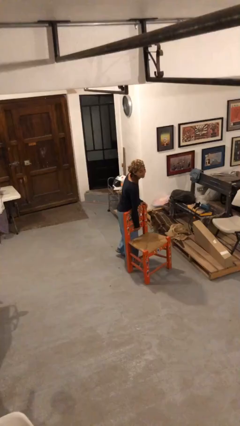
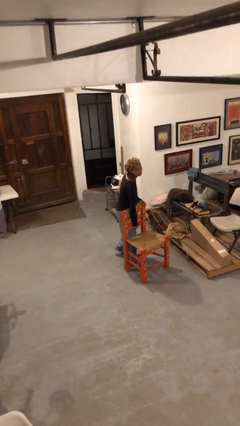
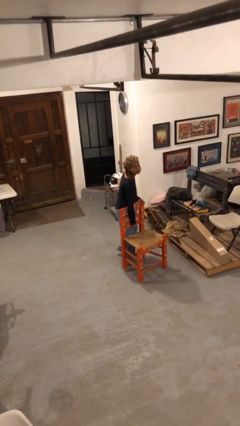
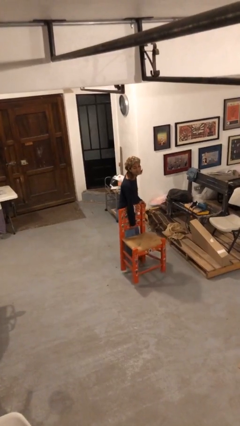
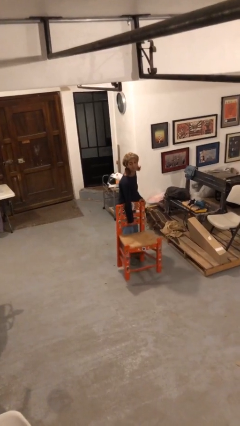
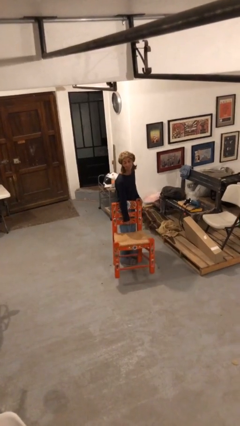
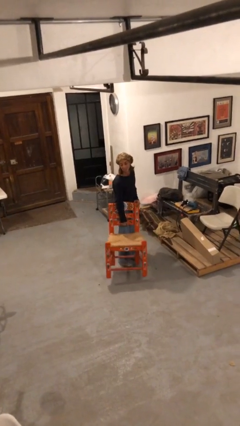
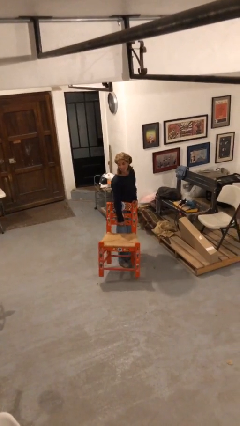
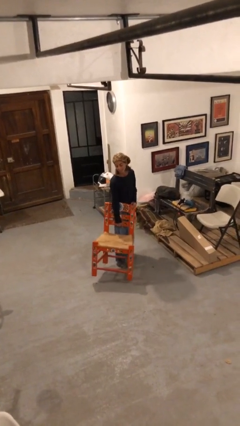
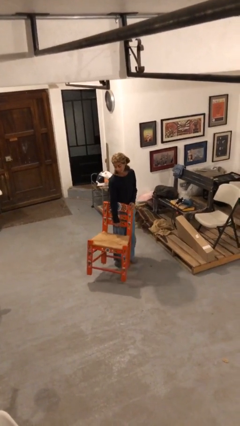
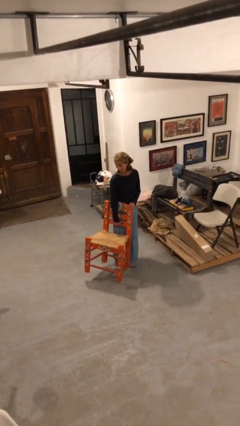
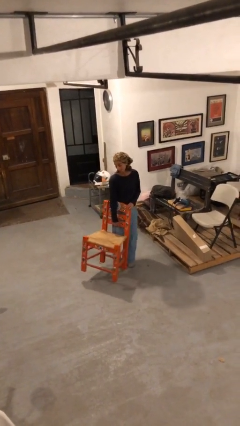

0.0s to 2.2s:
person picks up object from floor

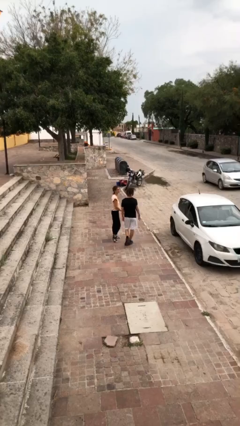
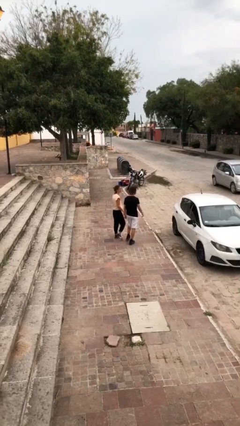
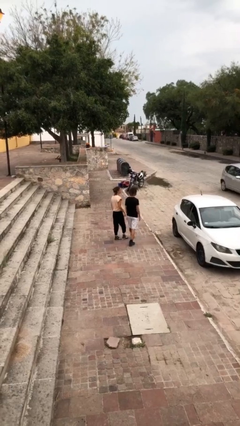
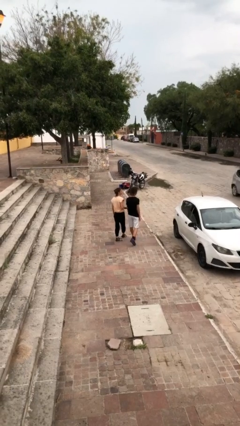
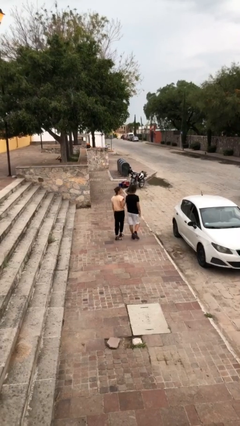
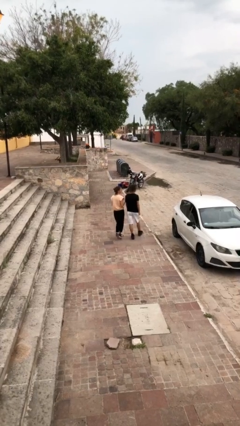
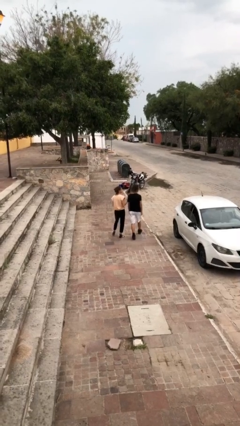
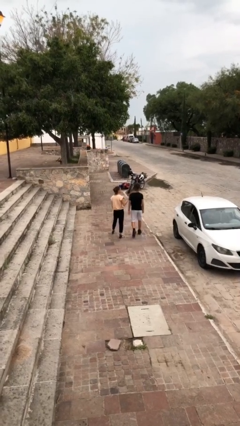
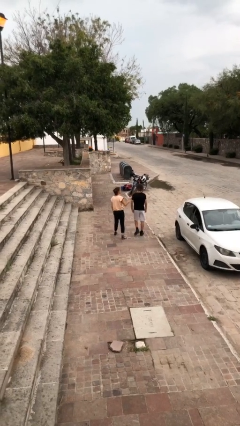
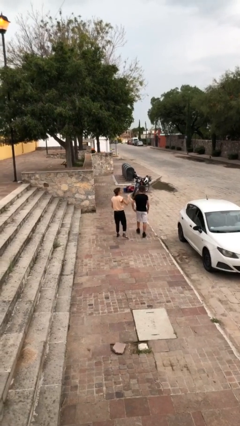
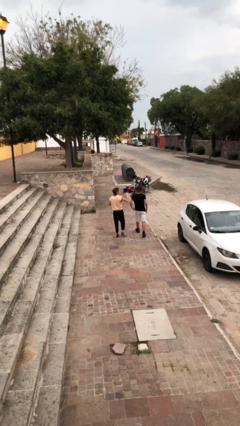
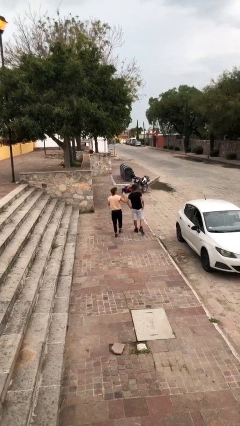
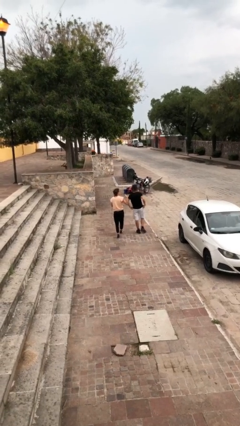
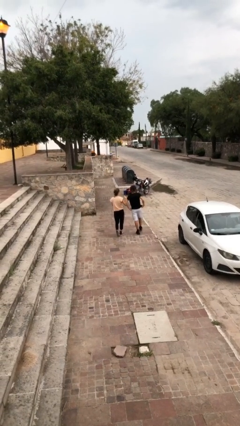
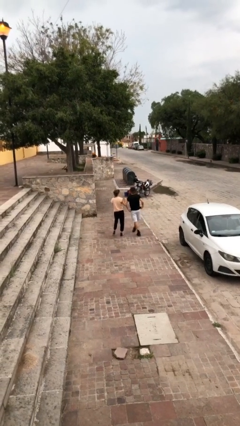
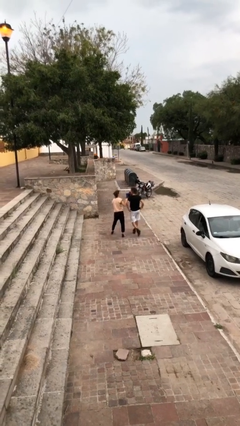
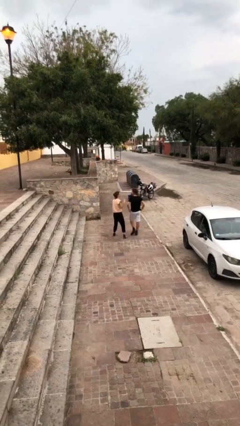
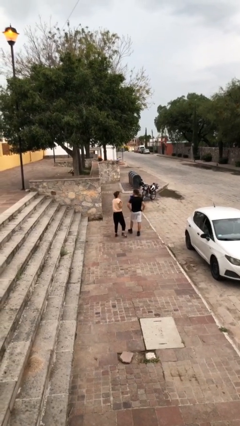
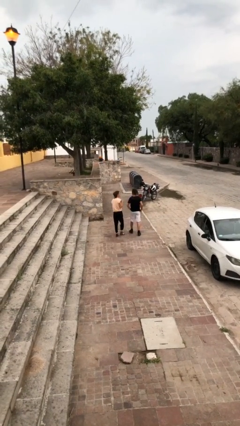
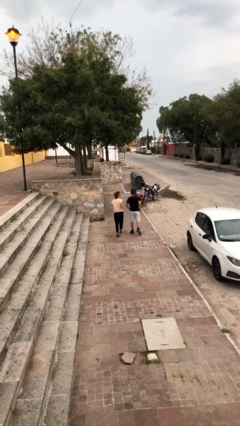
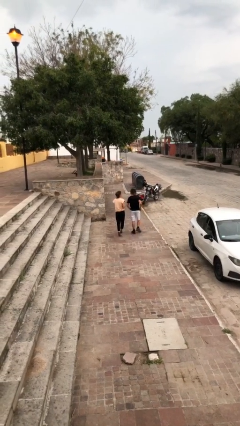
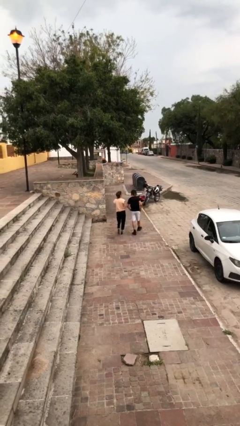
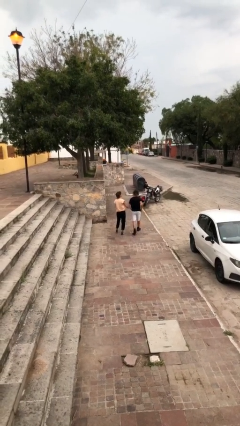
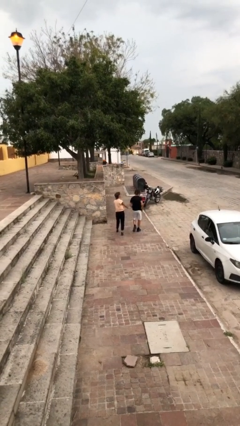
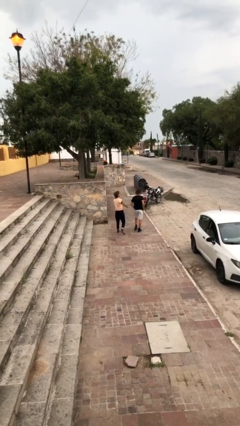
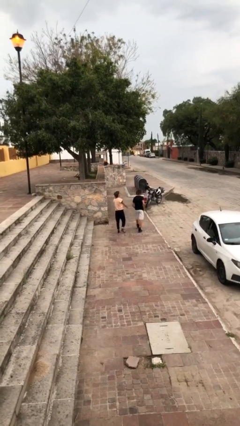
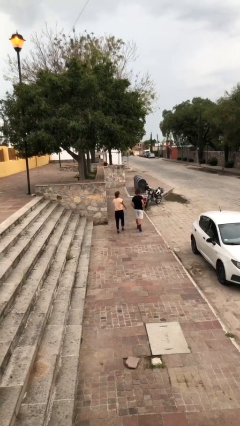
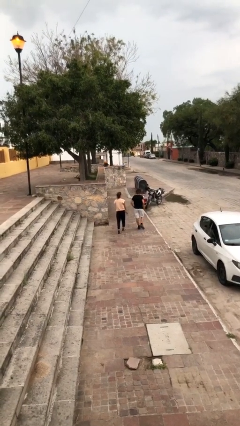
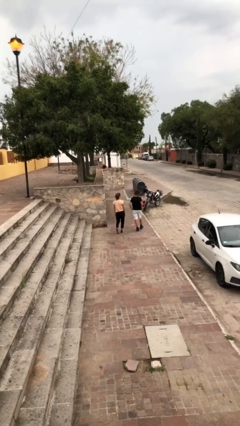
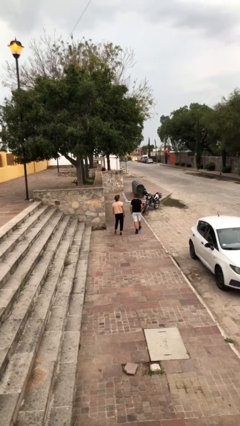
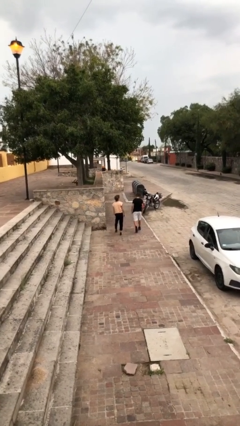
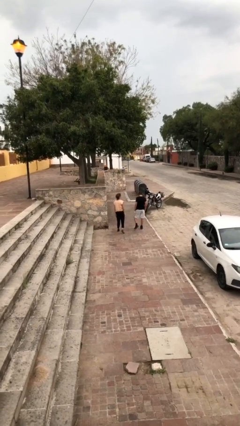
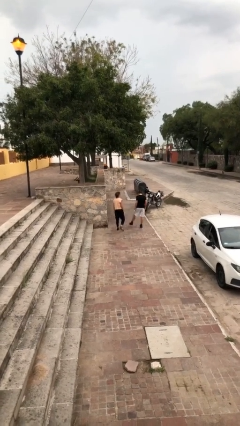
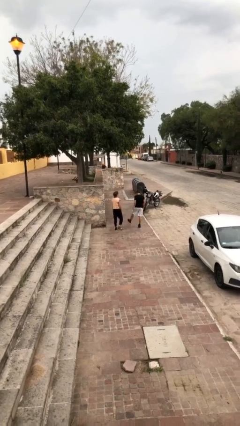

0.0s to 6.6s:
person talks to person

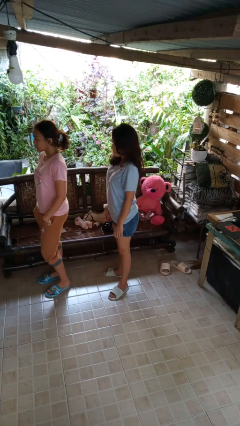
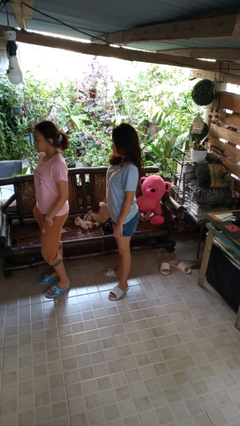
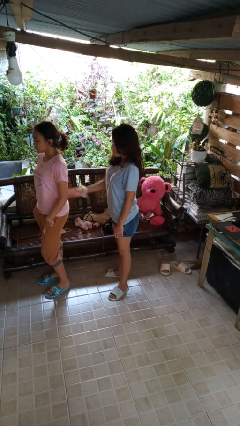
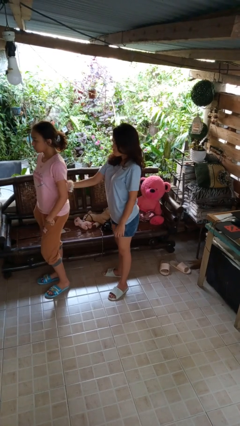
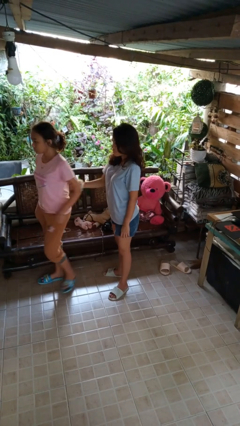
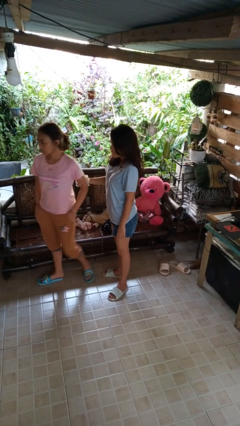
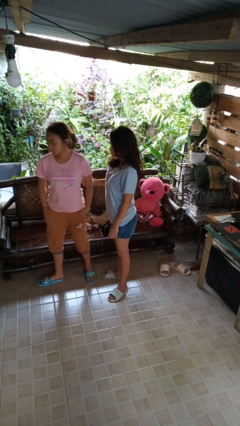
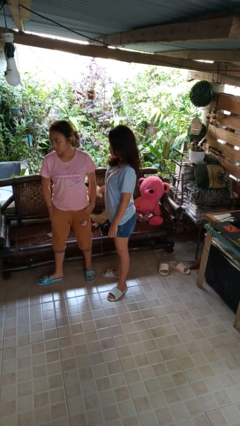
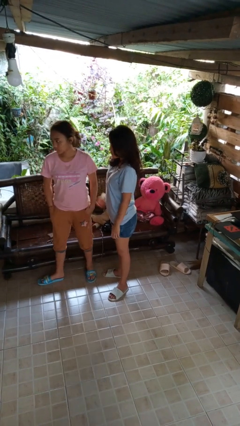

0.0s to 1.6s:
person grabs person by bicep

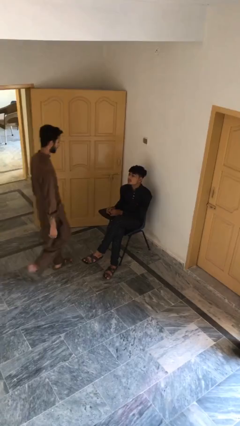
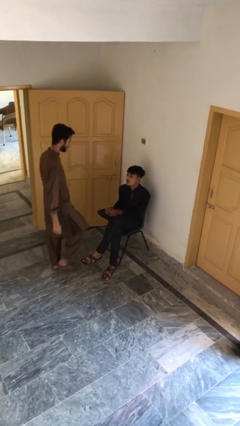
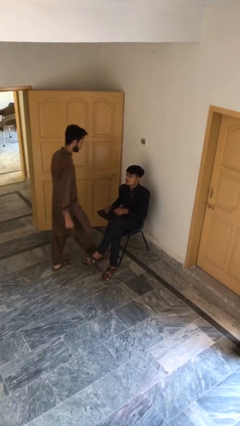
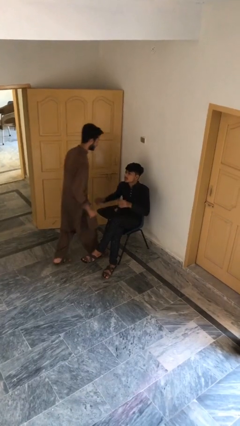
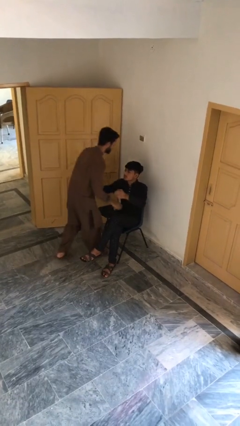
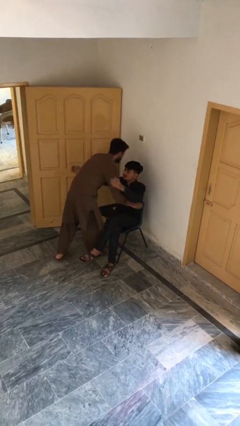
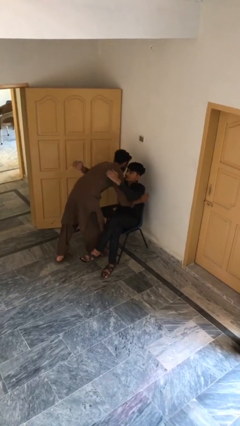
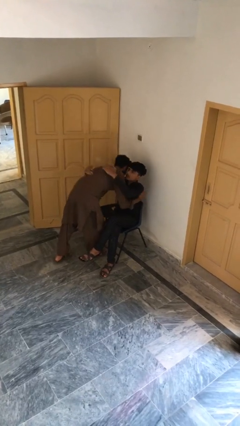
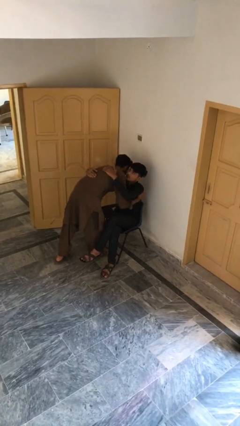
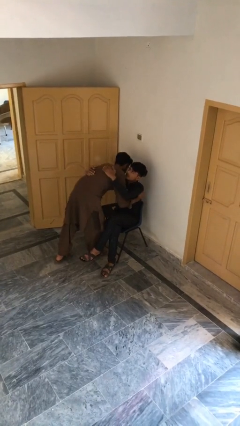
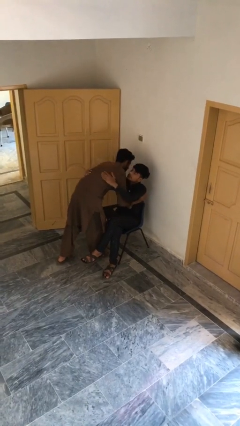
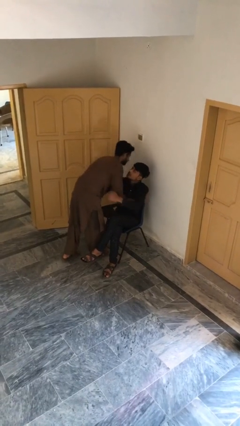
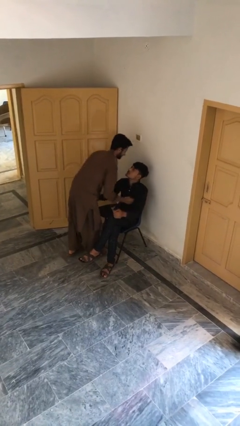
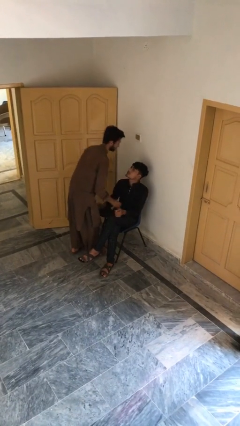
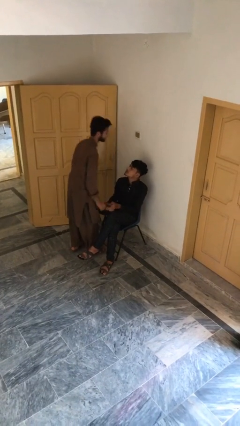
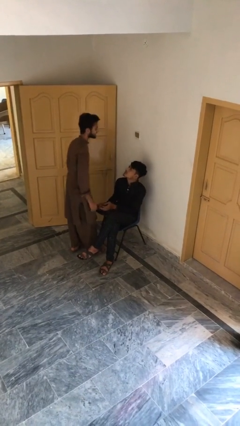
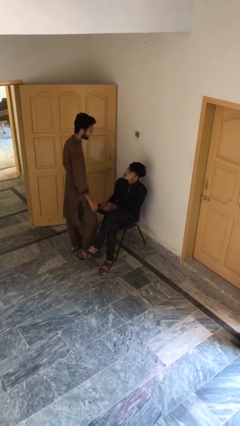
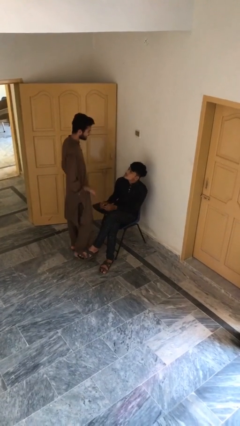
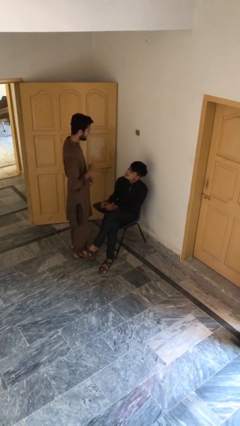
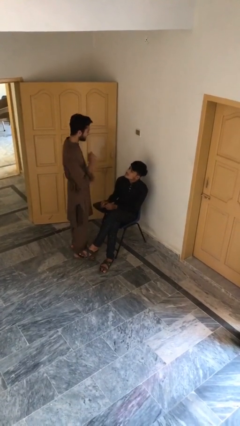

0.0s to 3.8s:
person embraces person

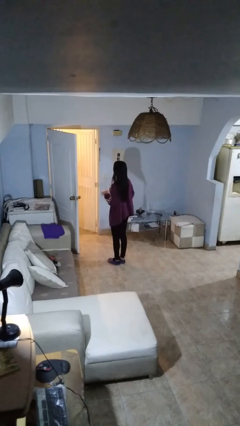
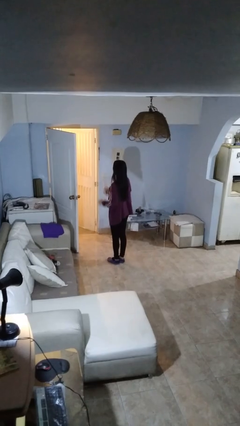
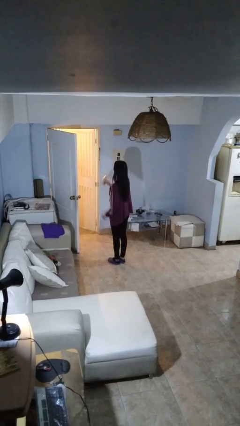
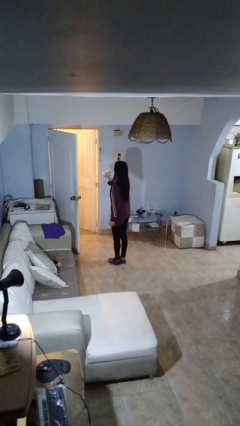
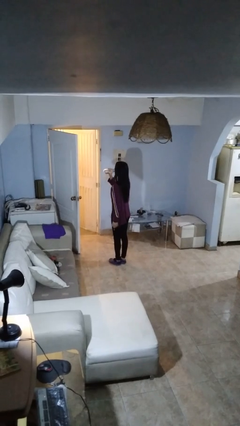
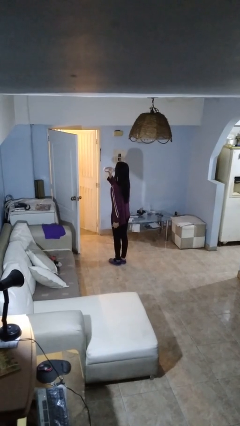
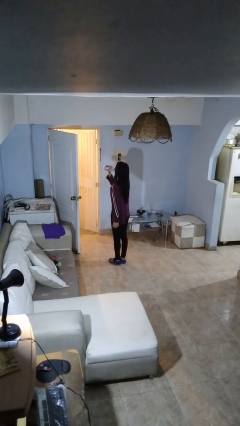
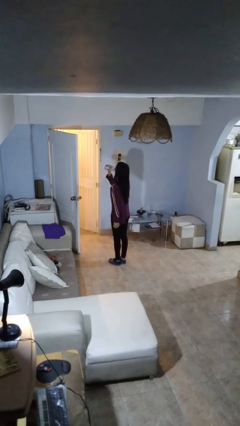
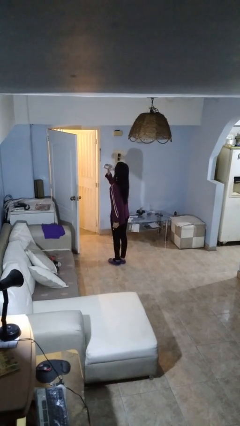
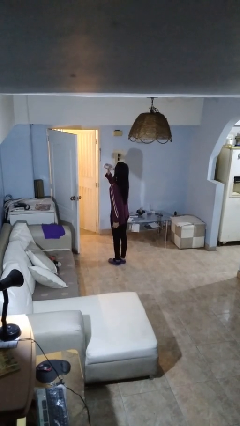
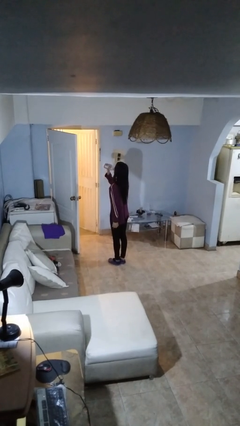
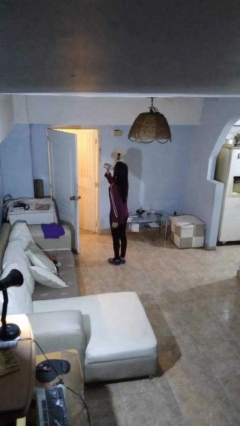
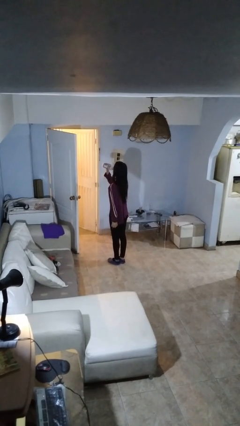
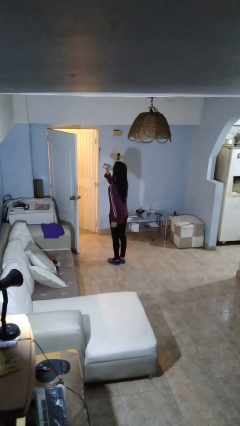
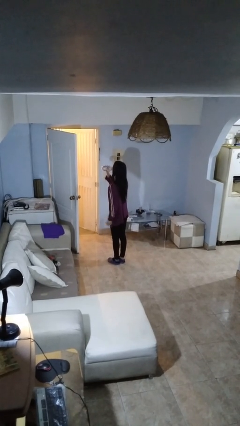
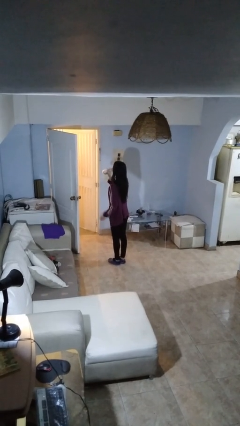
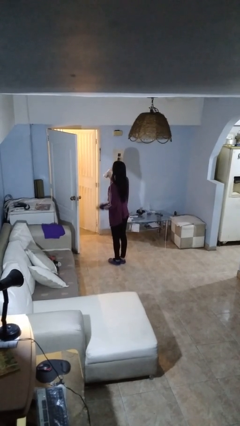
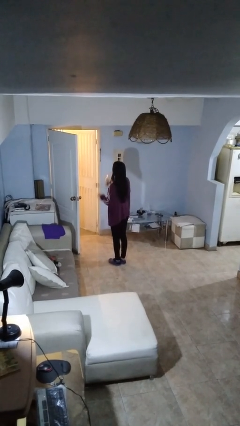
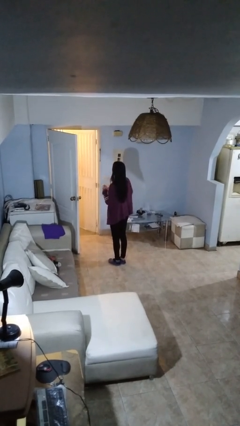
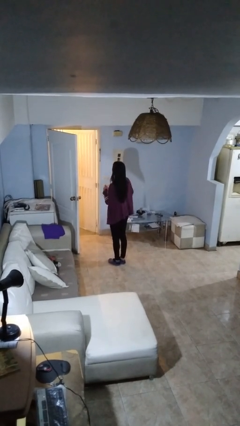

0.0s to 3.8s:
person drinks from bottle
